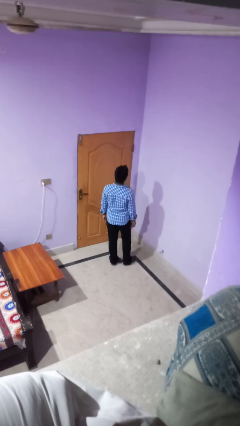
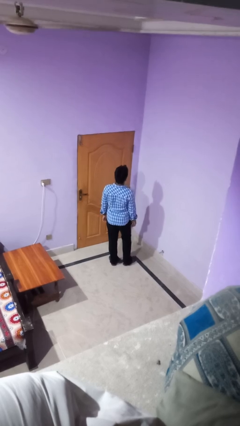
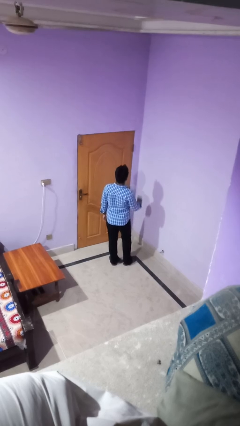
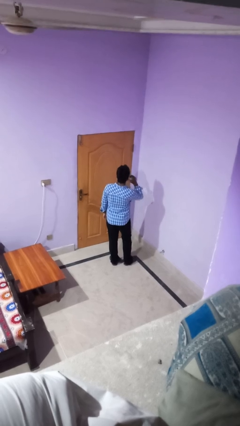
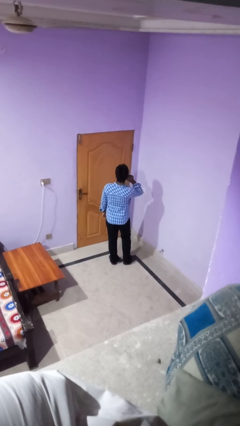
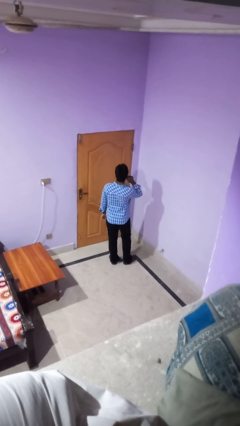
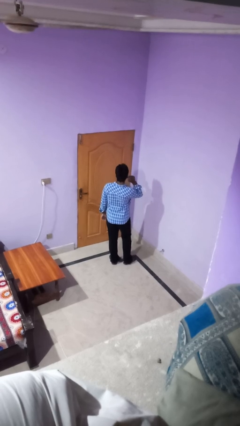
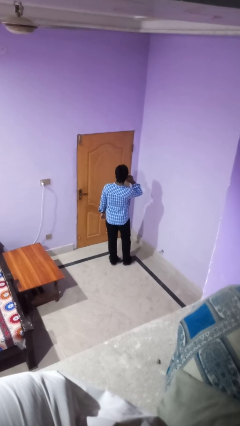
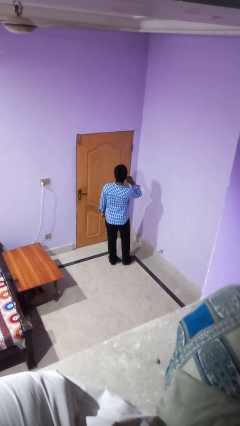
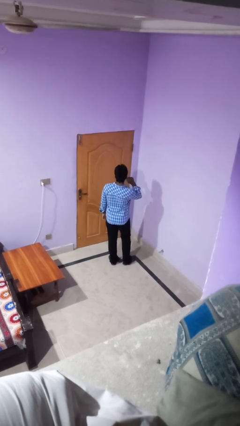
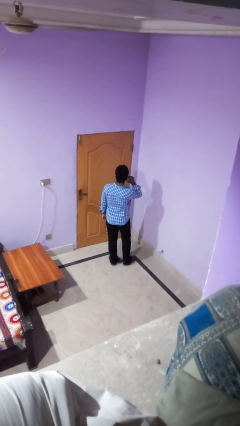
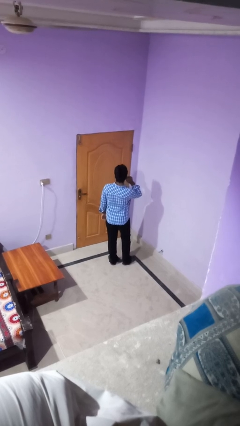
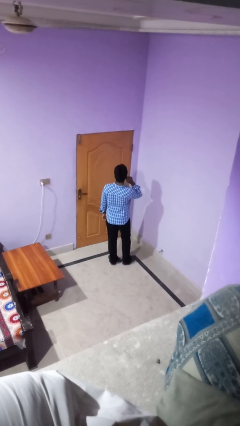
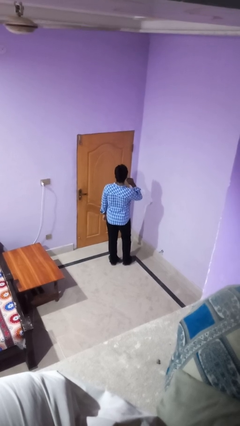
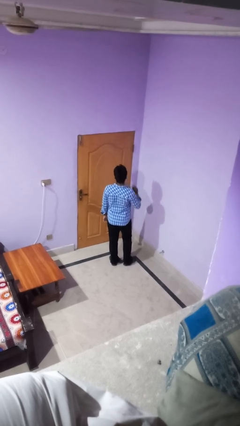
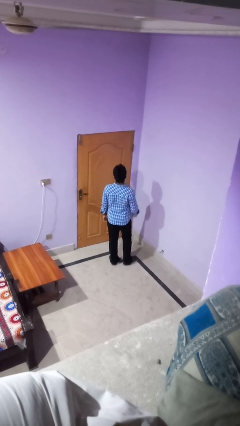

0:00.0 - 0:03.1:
person touches earlobe

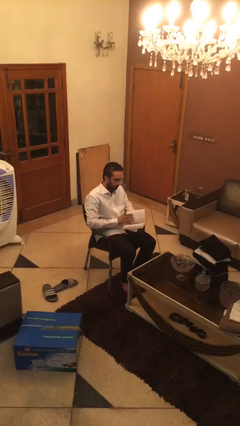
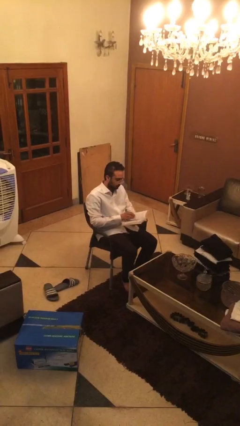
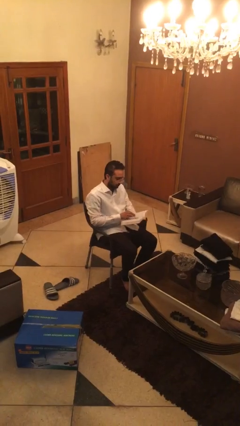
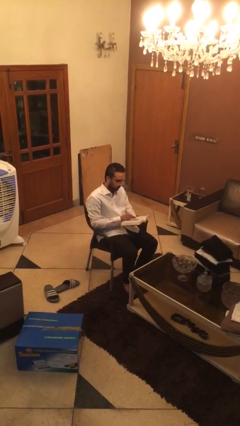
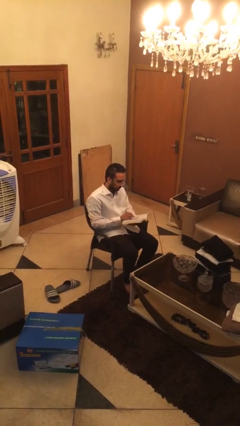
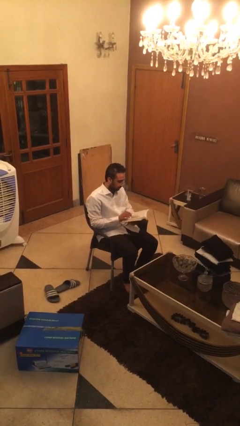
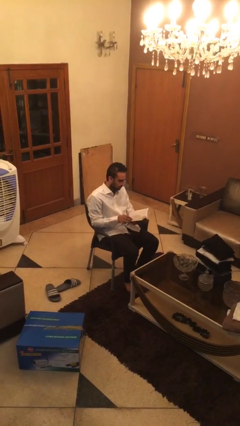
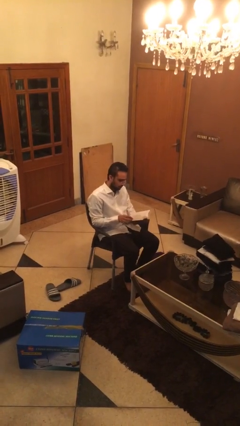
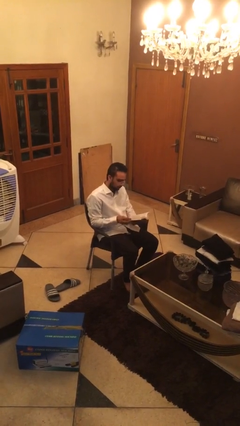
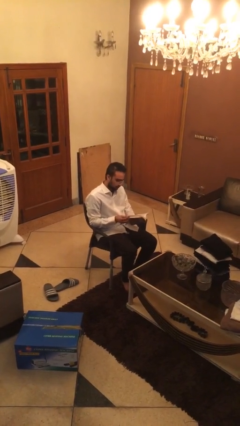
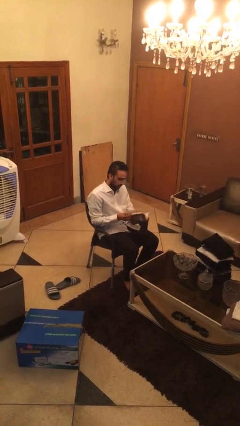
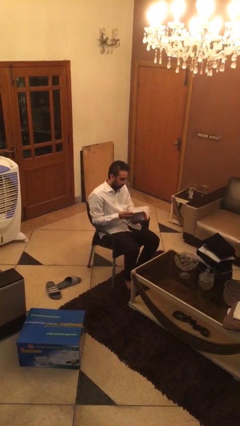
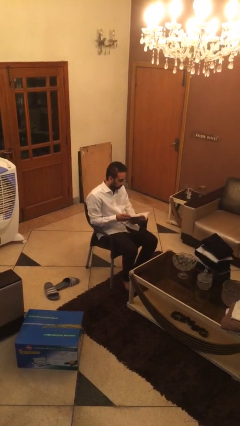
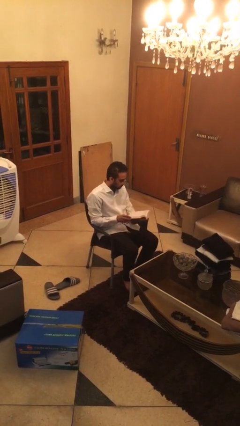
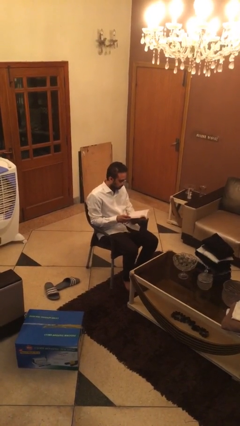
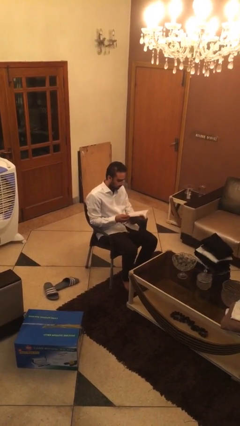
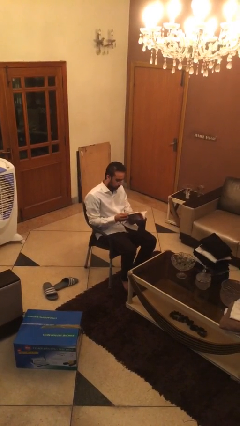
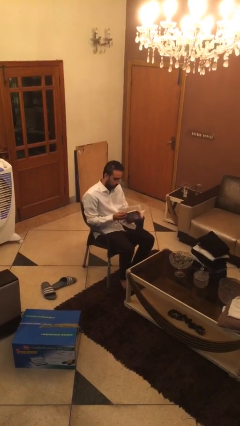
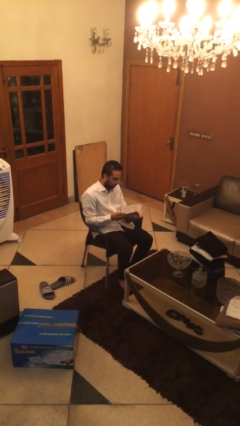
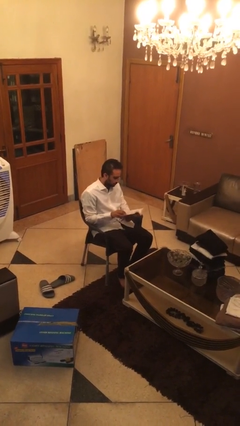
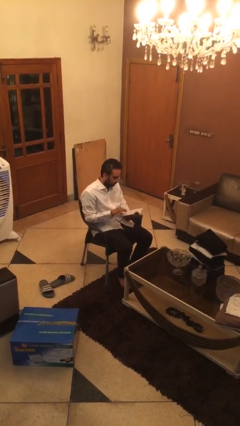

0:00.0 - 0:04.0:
person reads document

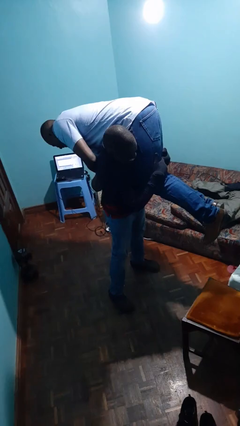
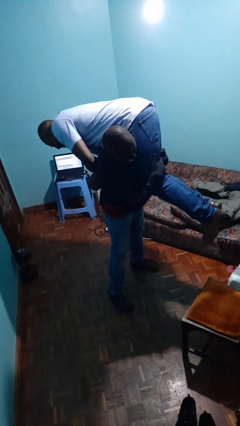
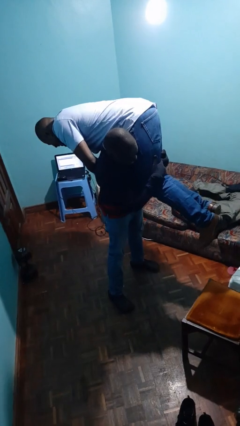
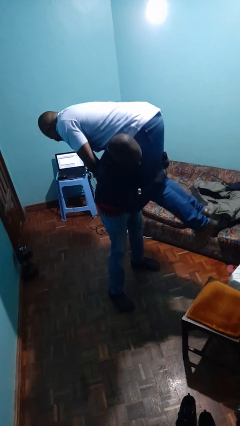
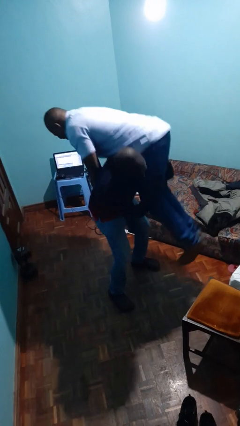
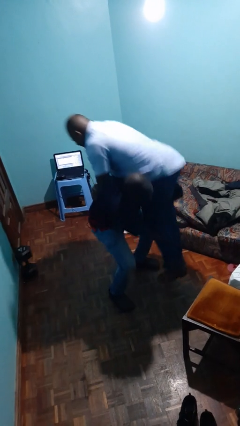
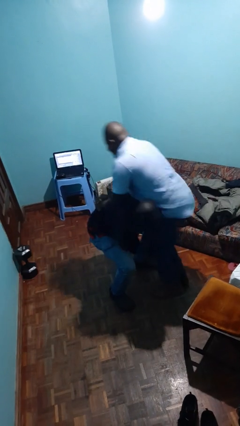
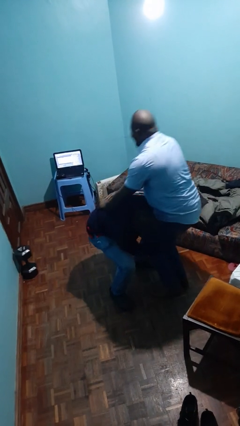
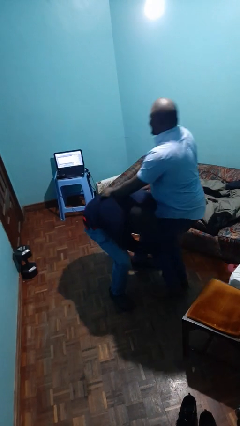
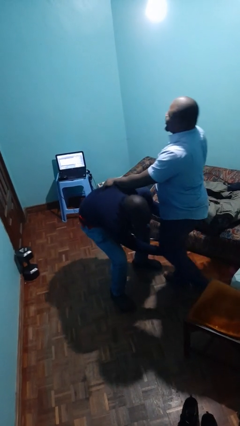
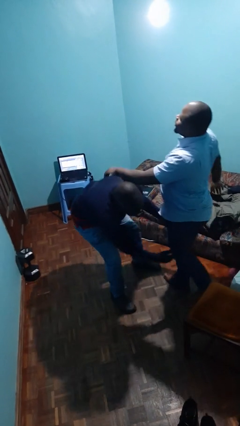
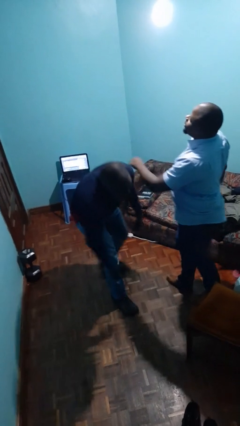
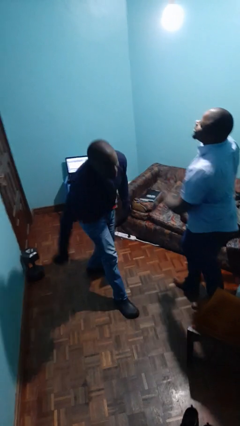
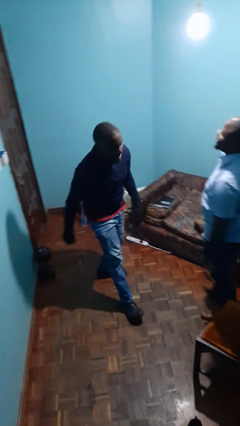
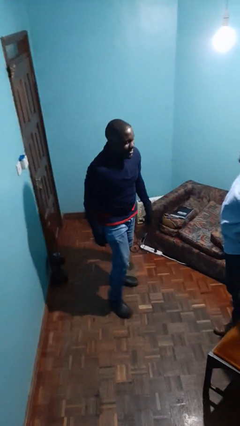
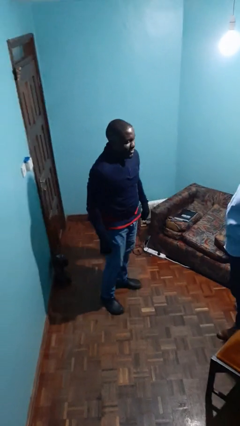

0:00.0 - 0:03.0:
person puts down person

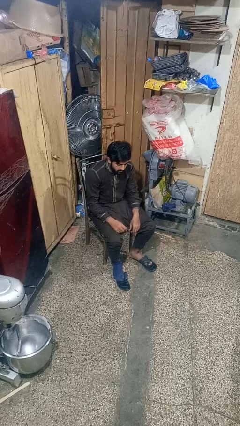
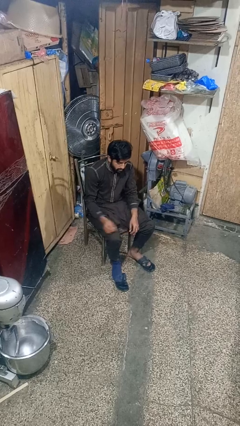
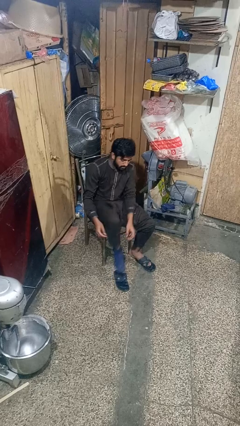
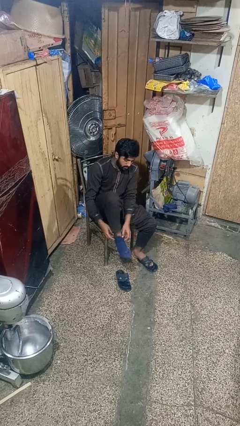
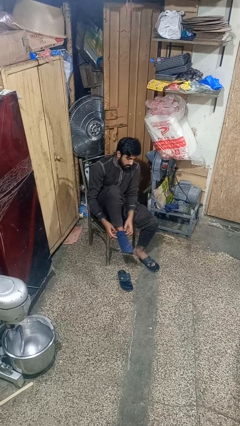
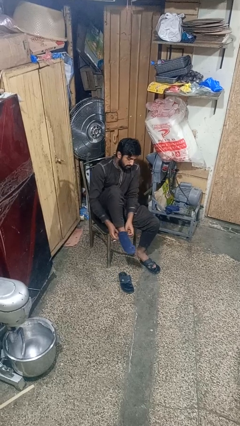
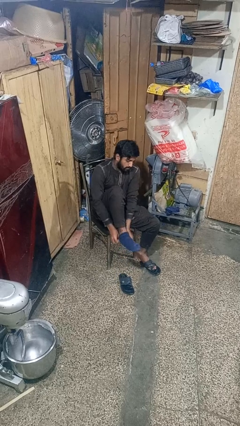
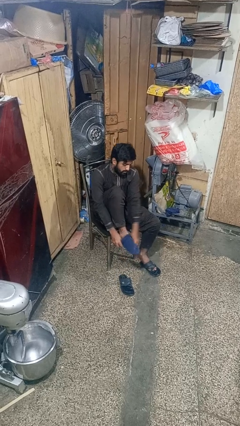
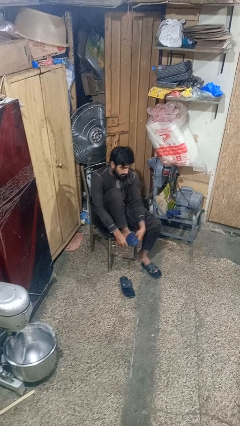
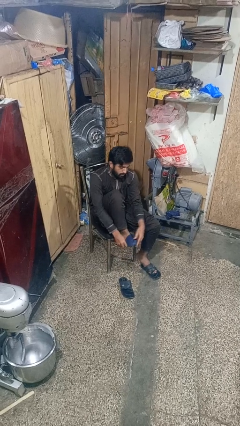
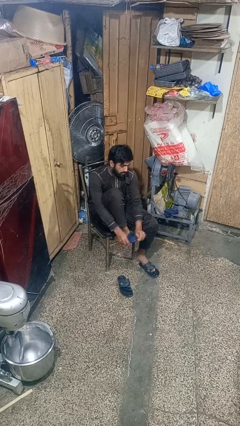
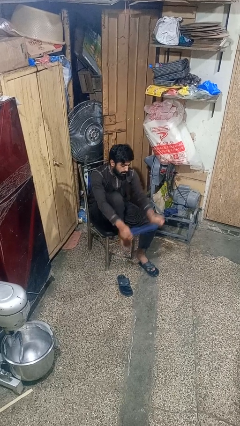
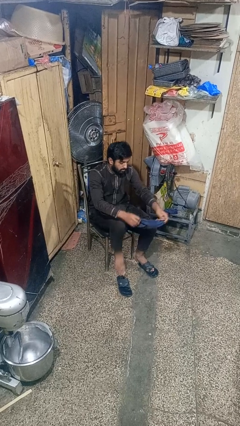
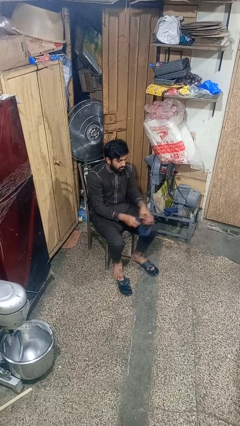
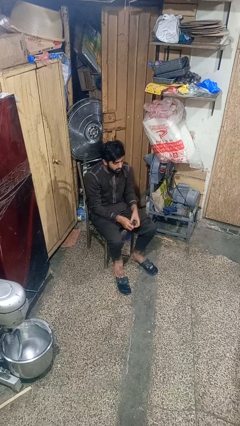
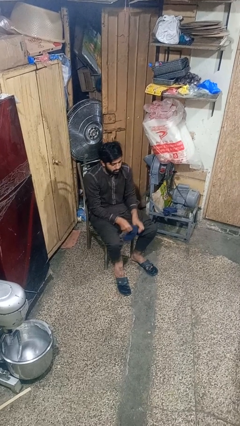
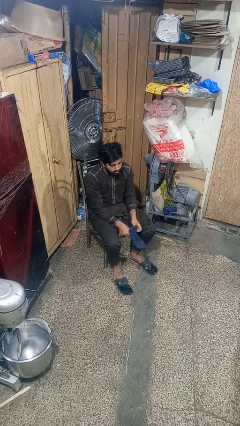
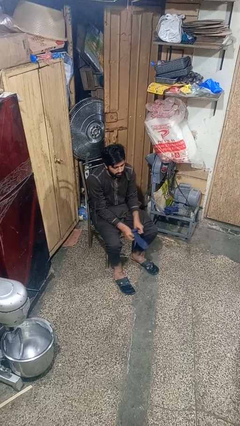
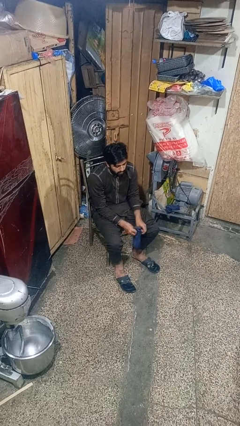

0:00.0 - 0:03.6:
person takes off socks

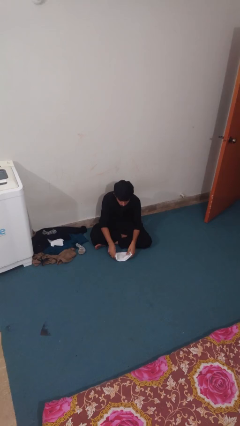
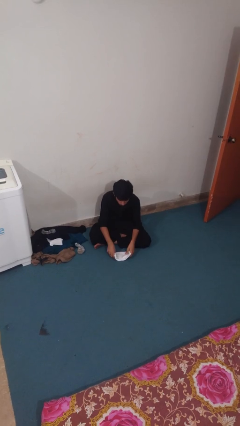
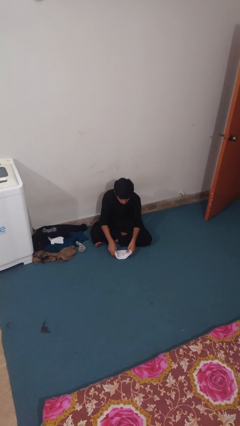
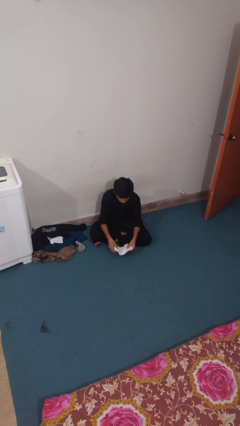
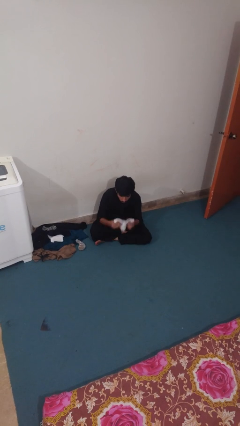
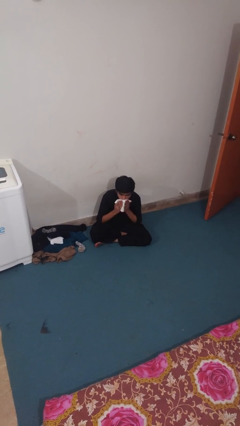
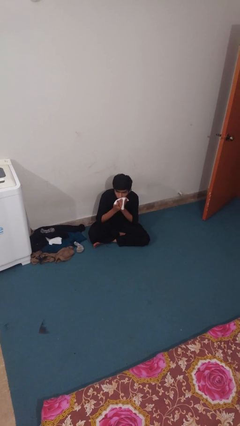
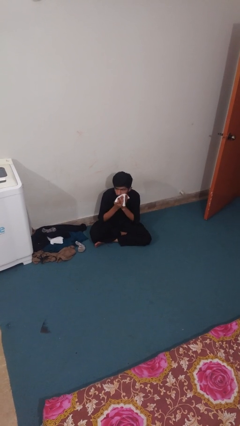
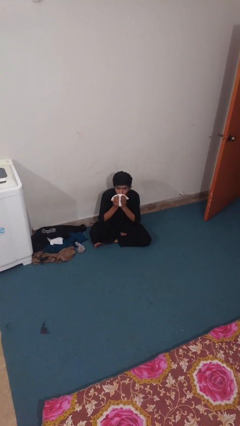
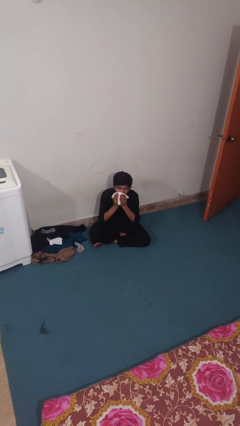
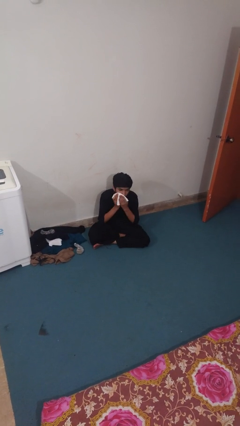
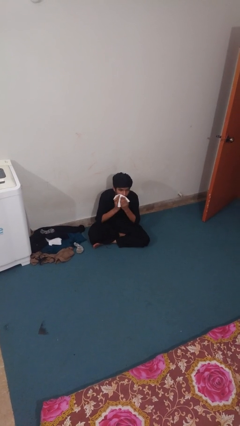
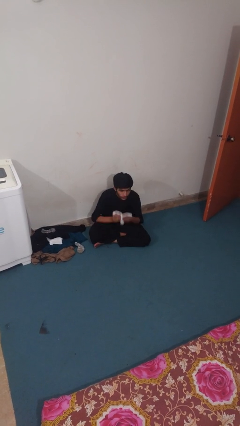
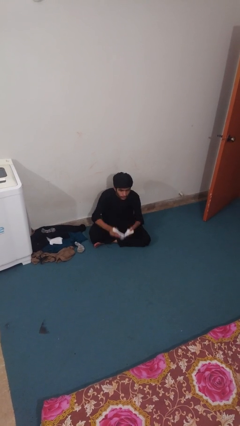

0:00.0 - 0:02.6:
person wipes mouth with napkin

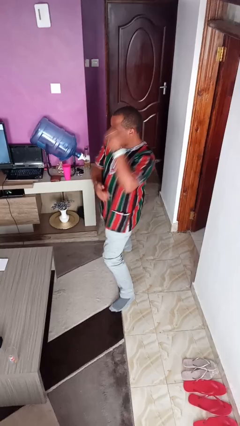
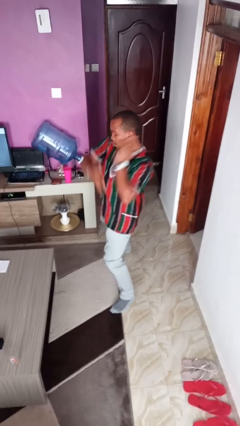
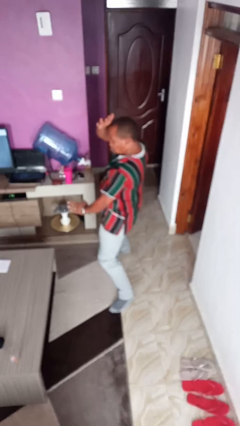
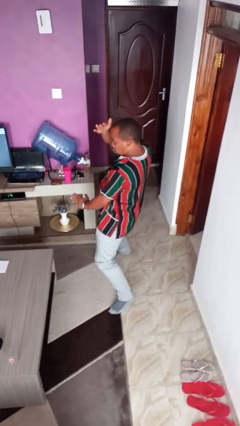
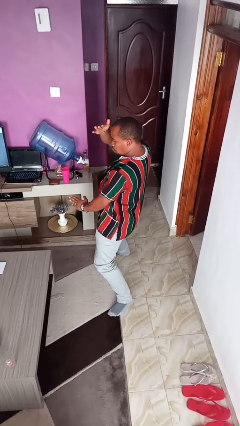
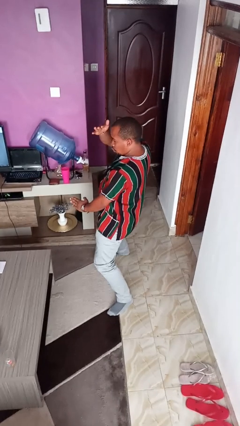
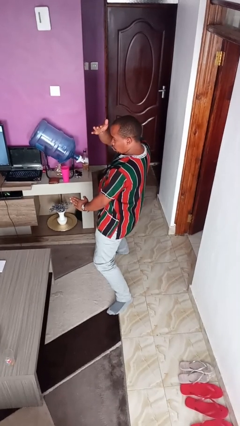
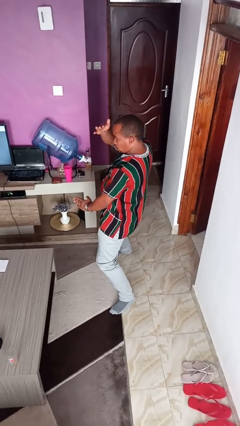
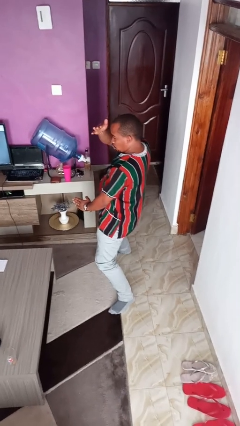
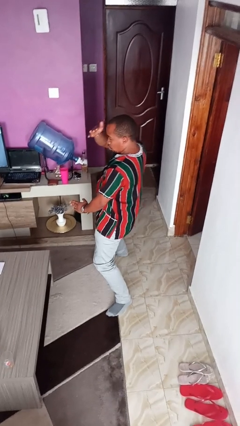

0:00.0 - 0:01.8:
person karate chop
